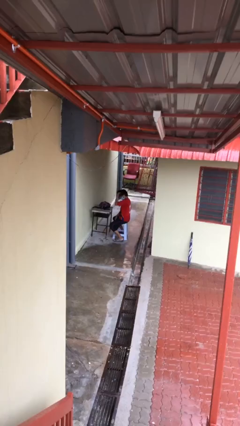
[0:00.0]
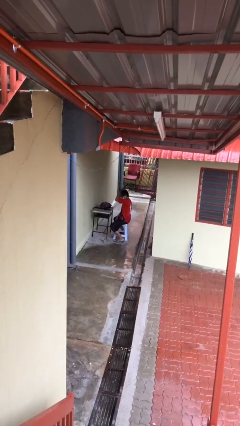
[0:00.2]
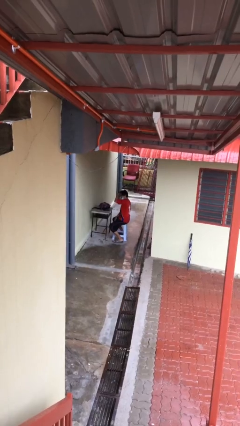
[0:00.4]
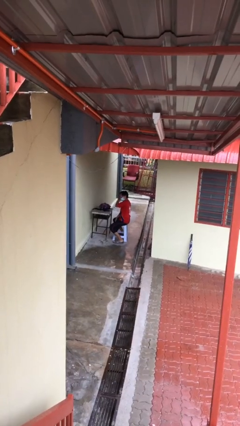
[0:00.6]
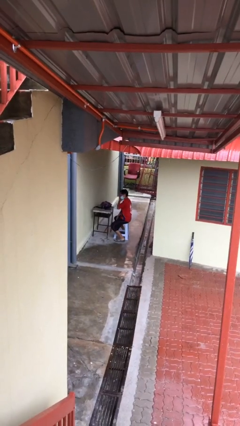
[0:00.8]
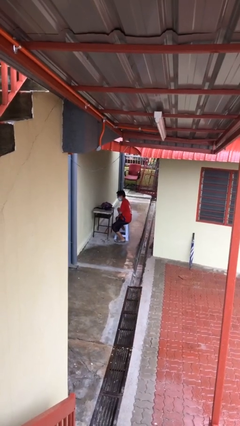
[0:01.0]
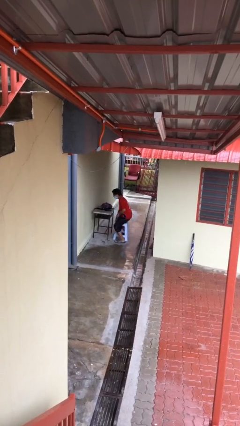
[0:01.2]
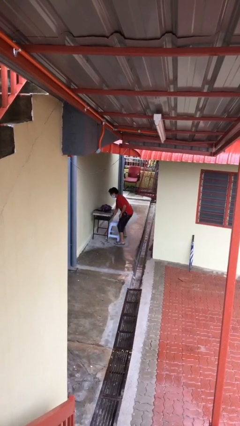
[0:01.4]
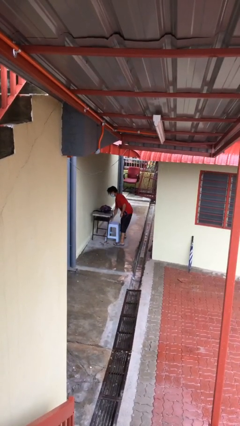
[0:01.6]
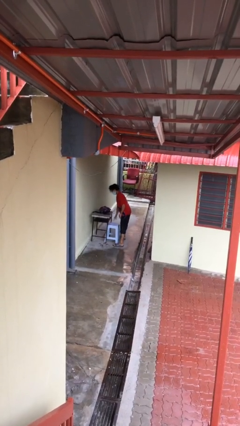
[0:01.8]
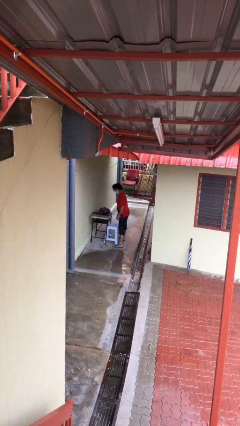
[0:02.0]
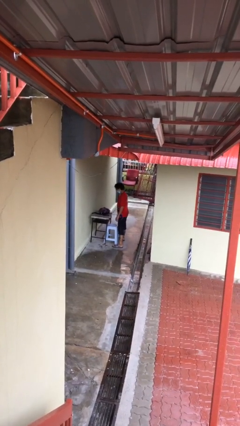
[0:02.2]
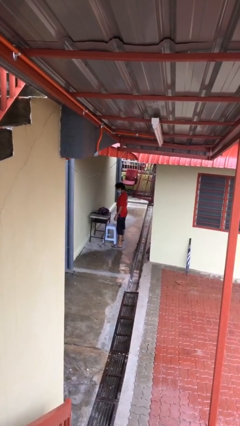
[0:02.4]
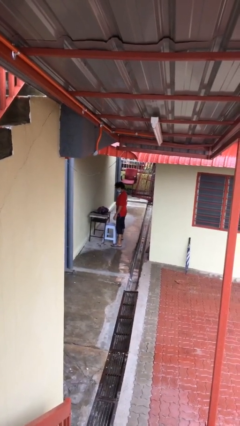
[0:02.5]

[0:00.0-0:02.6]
person stands up

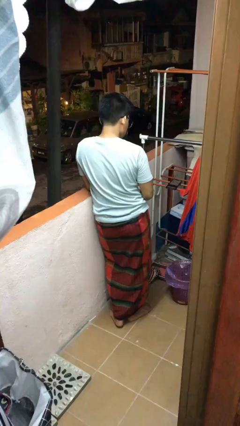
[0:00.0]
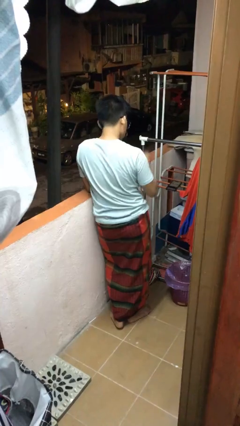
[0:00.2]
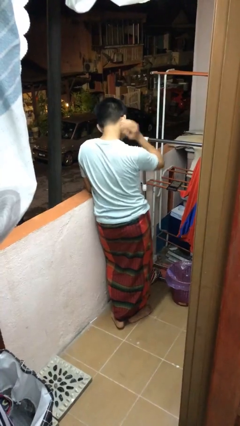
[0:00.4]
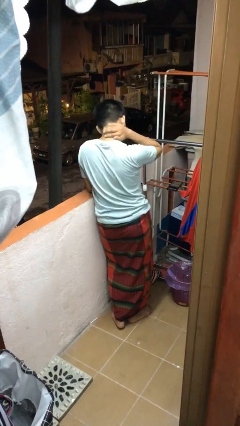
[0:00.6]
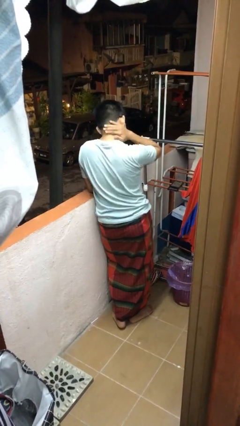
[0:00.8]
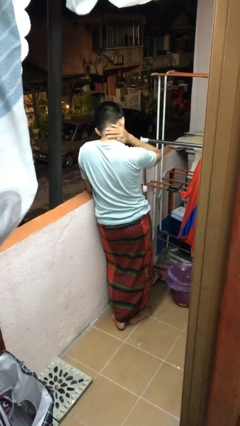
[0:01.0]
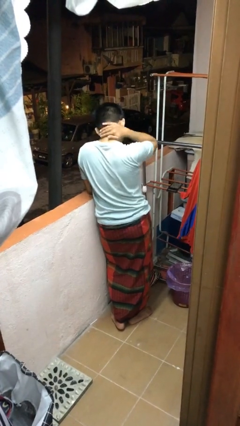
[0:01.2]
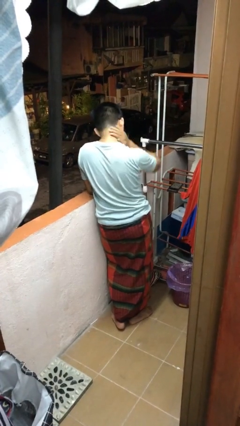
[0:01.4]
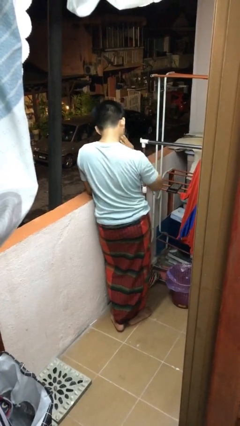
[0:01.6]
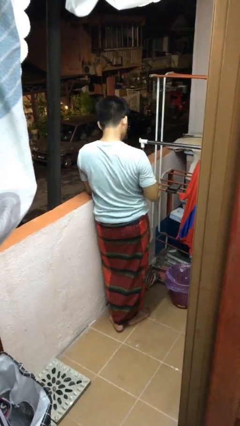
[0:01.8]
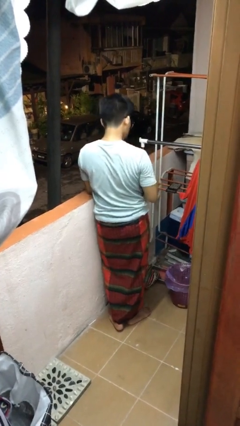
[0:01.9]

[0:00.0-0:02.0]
person rubs neck

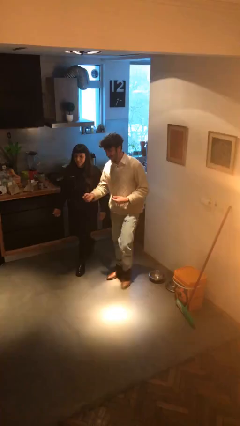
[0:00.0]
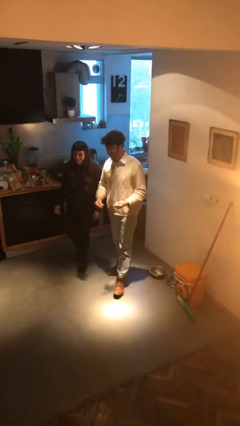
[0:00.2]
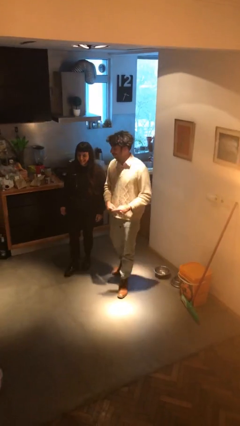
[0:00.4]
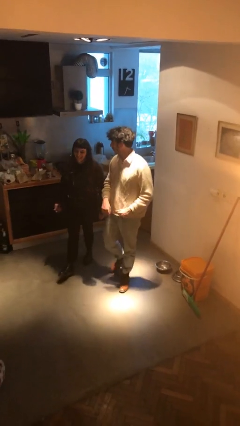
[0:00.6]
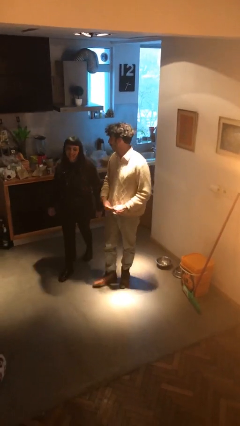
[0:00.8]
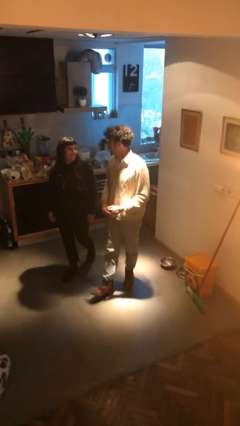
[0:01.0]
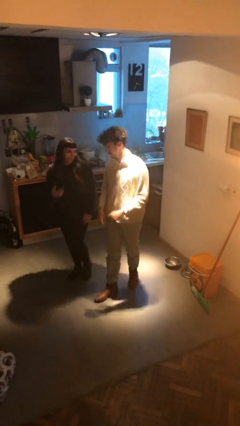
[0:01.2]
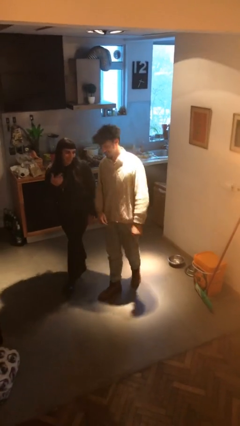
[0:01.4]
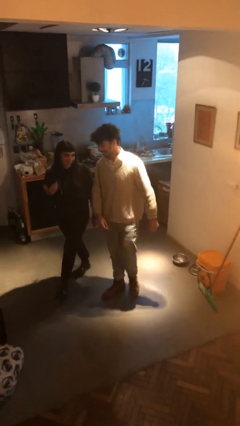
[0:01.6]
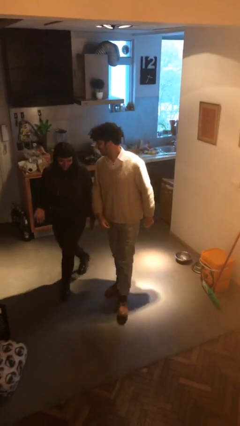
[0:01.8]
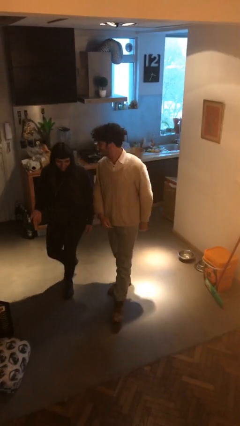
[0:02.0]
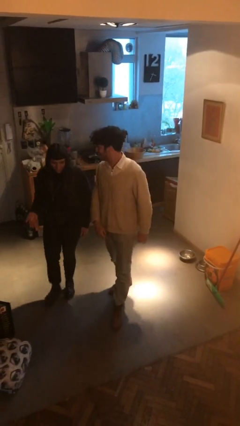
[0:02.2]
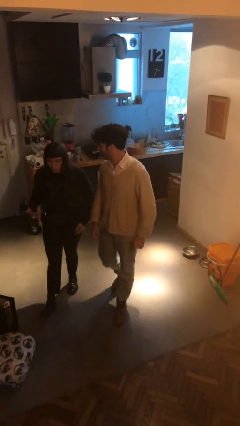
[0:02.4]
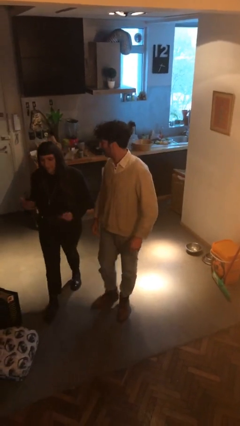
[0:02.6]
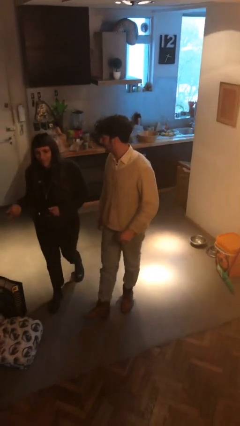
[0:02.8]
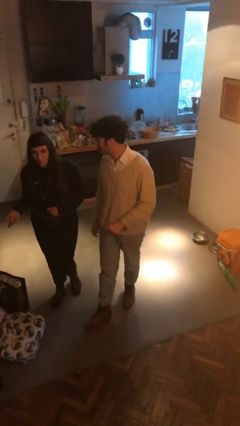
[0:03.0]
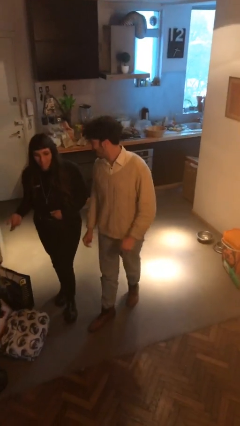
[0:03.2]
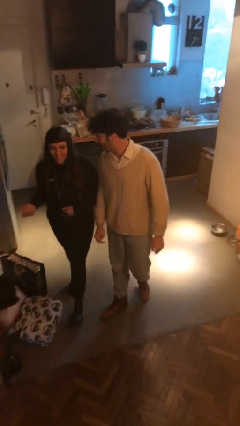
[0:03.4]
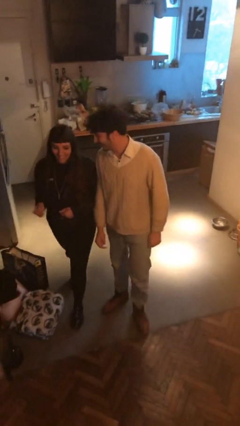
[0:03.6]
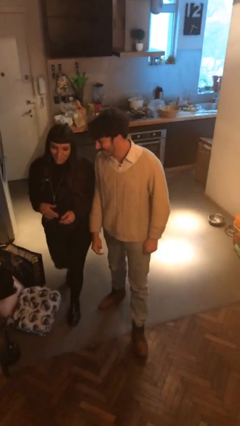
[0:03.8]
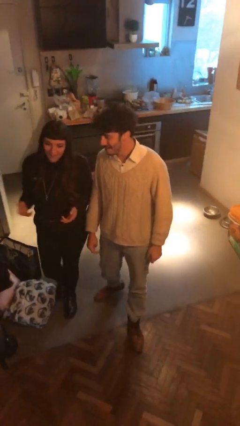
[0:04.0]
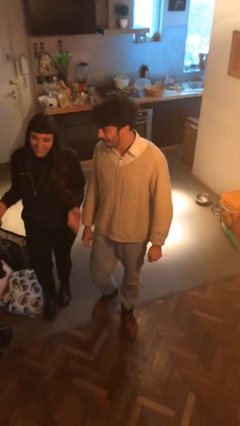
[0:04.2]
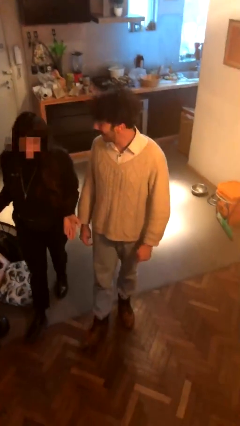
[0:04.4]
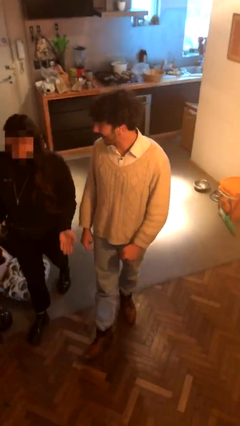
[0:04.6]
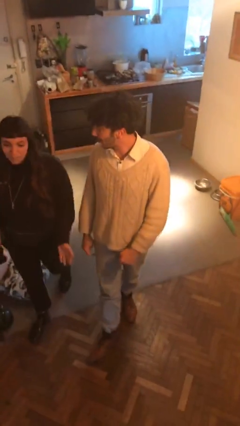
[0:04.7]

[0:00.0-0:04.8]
person talks to person

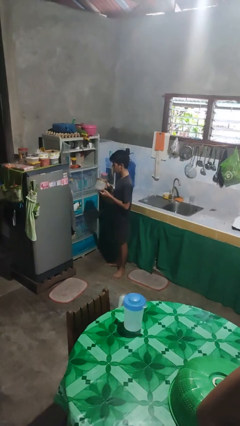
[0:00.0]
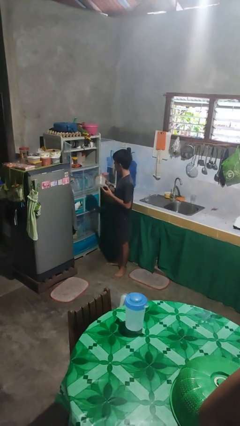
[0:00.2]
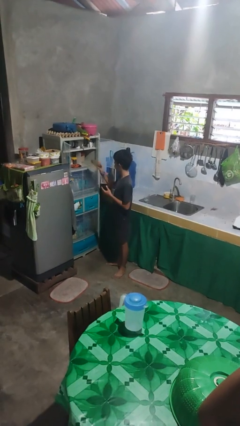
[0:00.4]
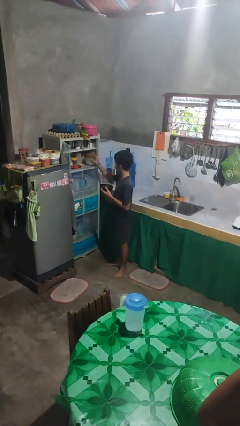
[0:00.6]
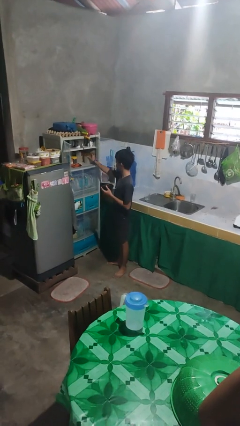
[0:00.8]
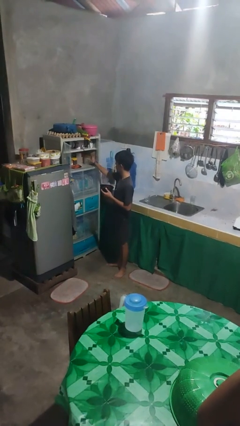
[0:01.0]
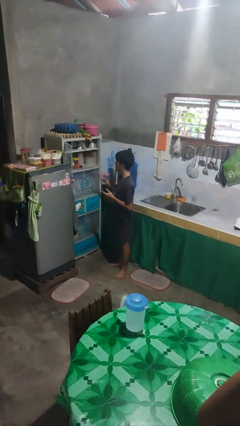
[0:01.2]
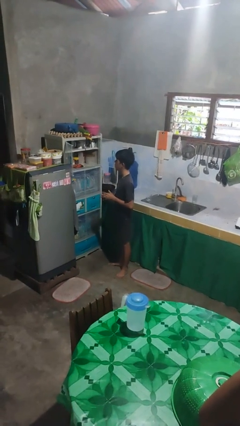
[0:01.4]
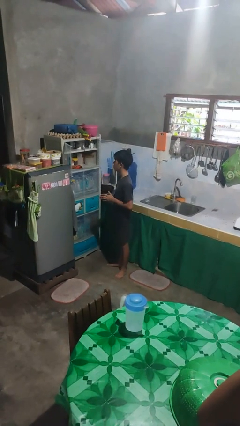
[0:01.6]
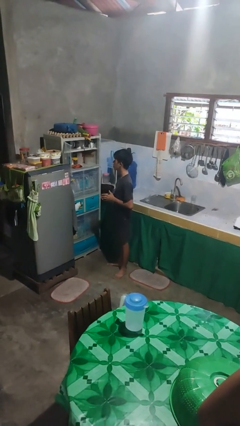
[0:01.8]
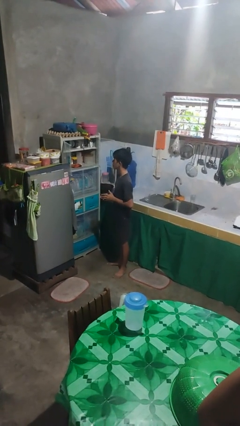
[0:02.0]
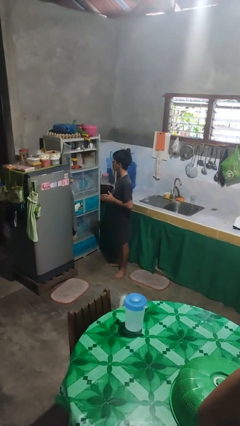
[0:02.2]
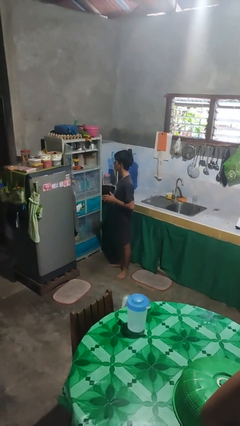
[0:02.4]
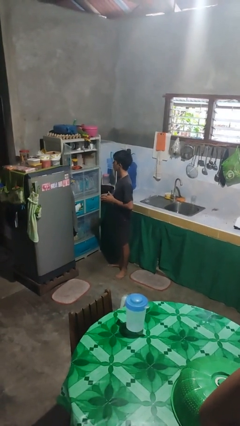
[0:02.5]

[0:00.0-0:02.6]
person puts object in cabinet

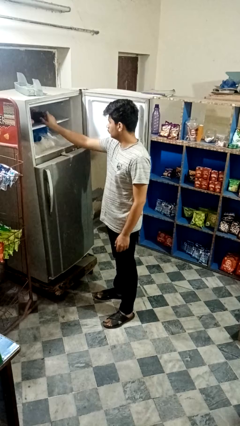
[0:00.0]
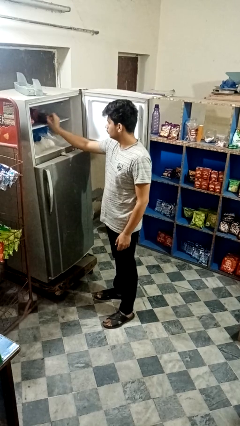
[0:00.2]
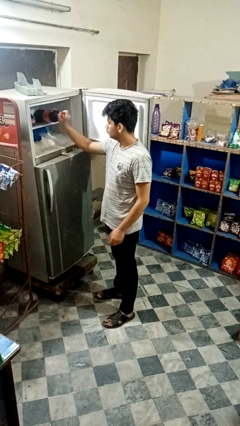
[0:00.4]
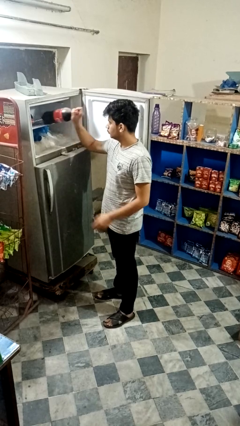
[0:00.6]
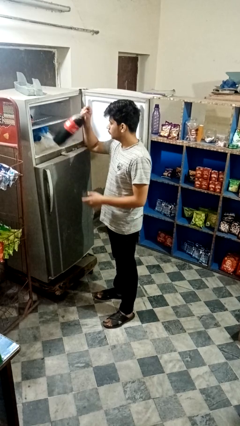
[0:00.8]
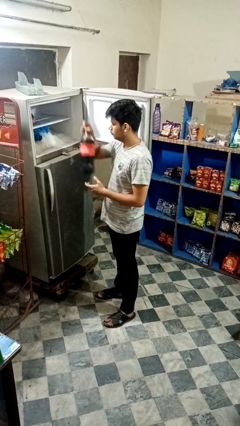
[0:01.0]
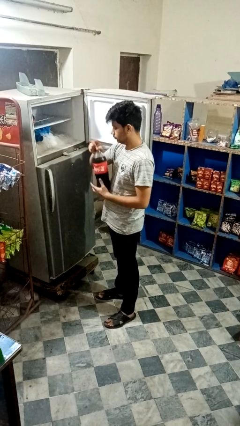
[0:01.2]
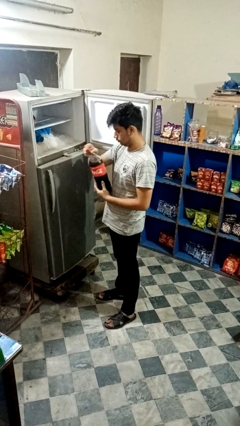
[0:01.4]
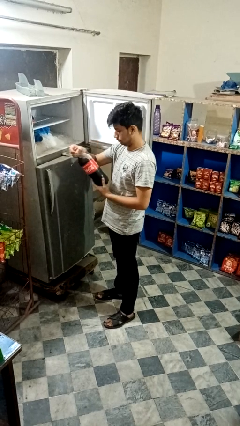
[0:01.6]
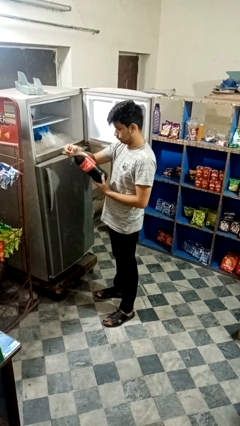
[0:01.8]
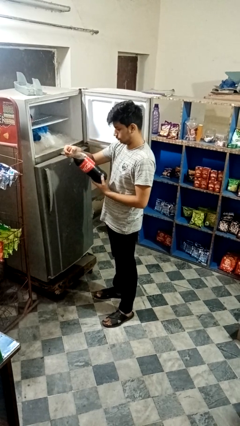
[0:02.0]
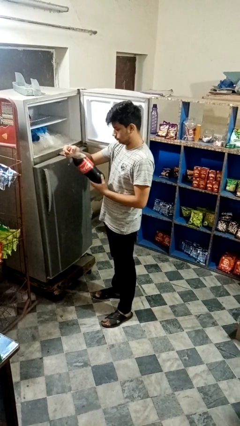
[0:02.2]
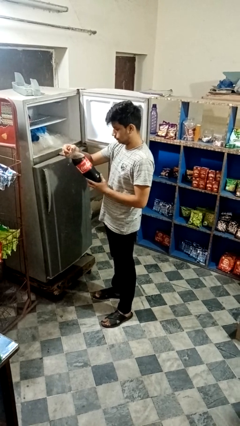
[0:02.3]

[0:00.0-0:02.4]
person takes object from refrigerator

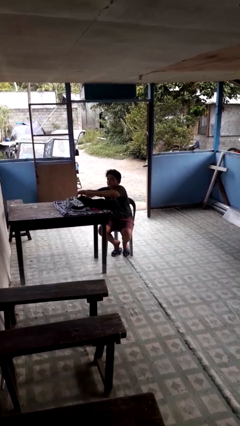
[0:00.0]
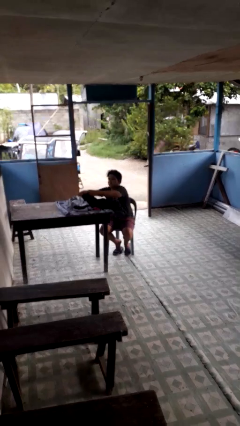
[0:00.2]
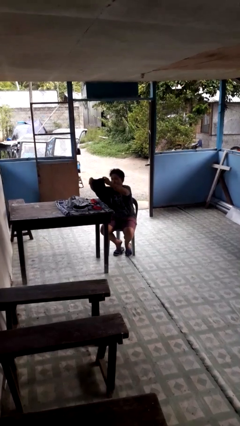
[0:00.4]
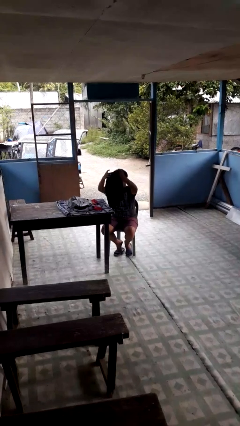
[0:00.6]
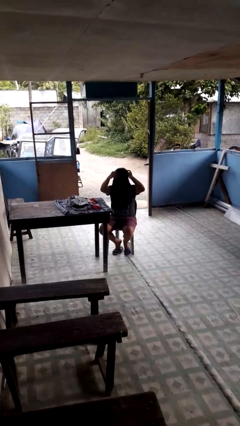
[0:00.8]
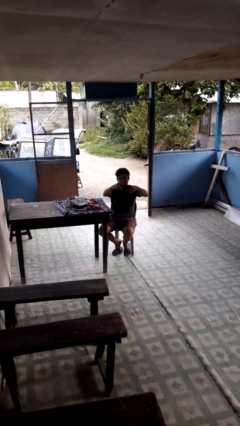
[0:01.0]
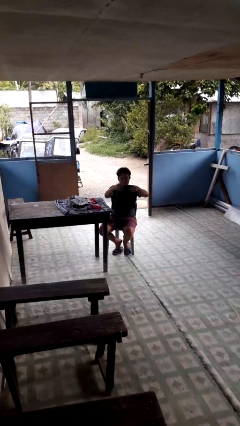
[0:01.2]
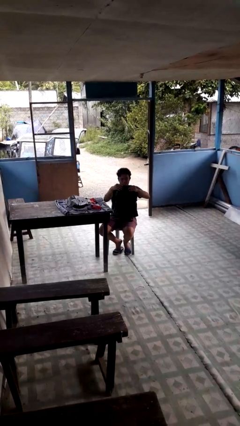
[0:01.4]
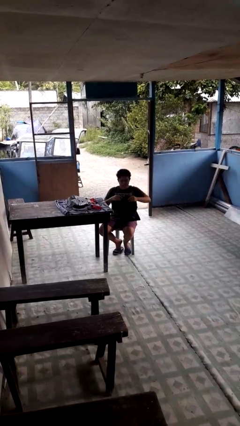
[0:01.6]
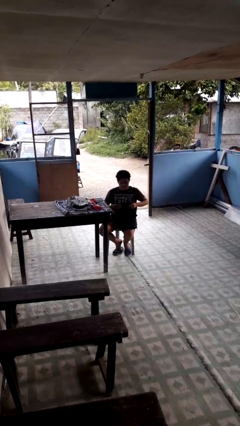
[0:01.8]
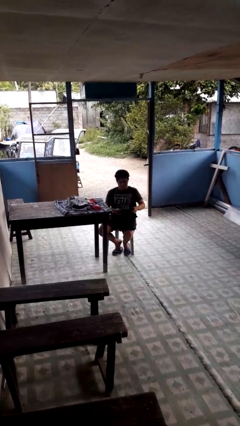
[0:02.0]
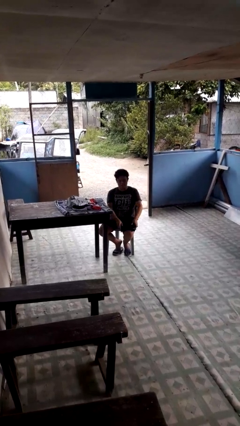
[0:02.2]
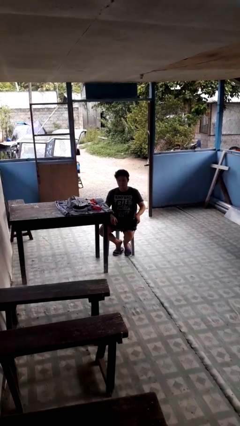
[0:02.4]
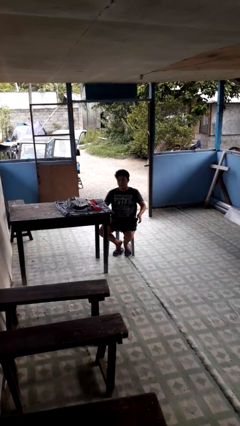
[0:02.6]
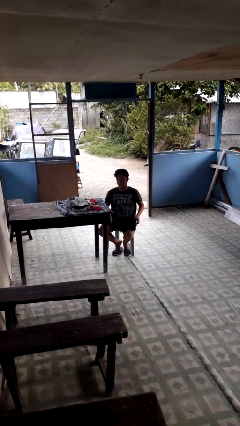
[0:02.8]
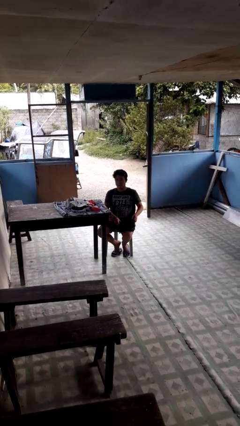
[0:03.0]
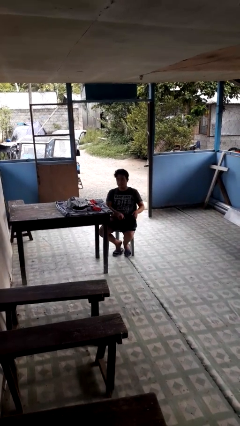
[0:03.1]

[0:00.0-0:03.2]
person folds pants
